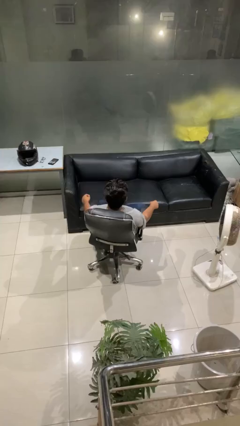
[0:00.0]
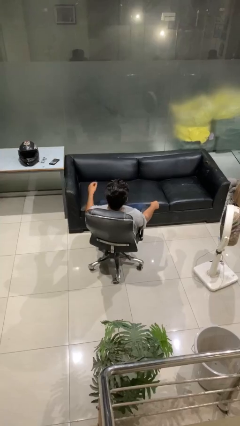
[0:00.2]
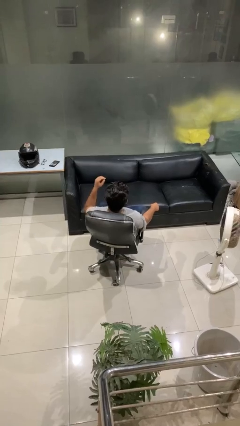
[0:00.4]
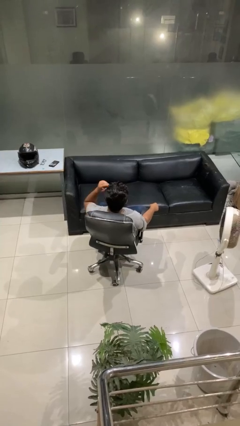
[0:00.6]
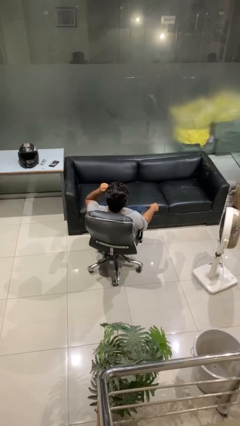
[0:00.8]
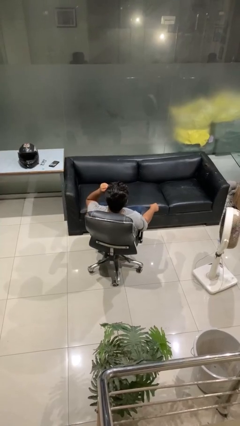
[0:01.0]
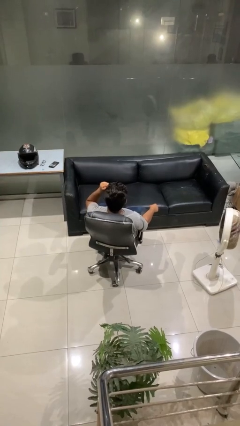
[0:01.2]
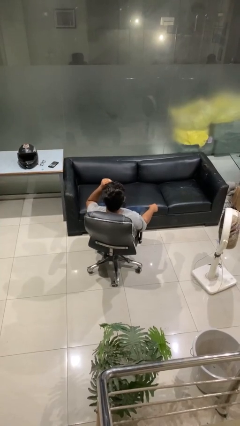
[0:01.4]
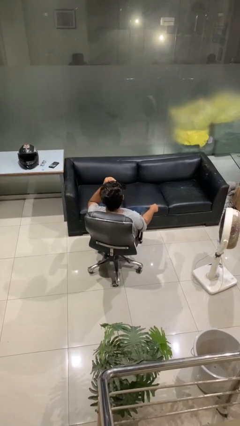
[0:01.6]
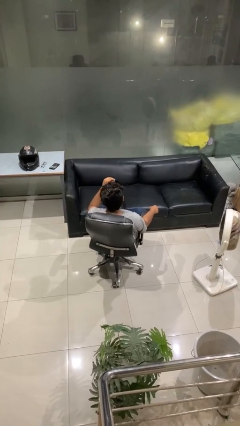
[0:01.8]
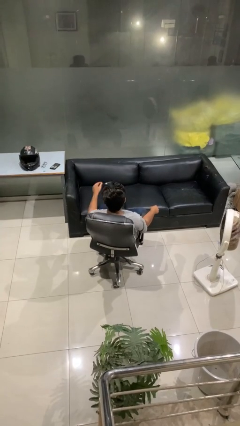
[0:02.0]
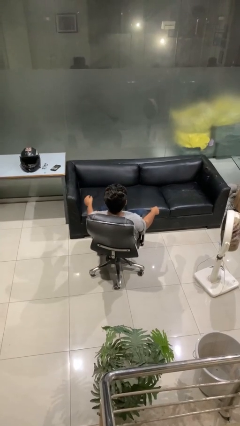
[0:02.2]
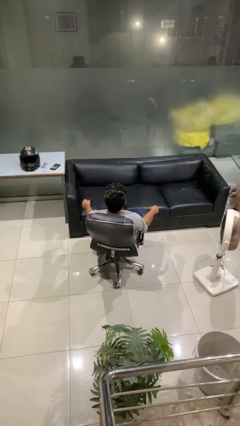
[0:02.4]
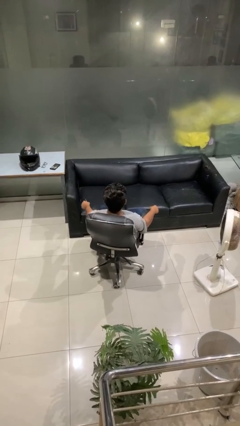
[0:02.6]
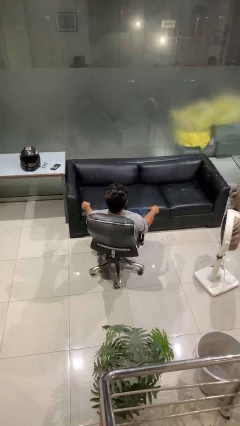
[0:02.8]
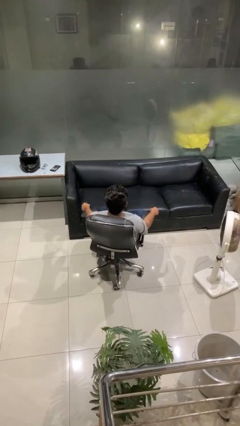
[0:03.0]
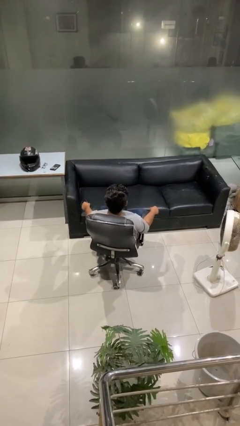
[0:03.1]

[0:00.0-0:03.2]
person takes off sunglasses

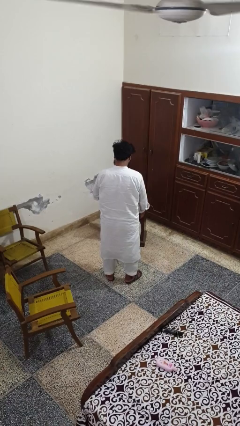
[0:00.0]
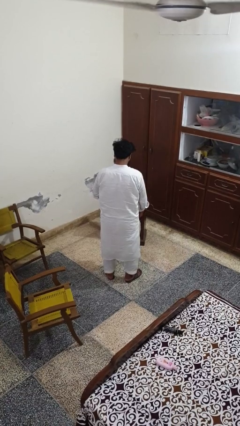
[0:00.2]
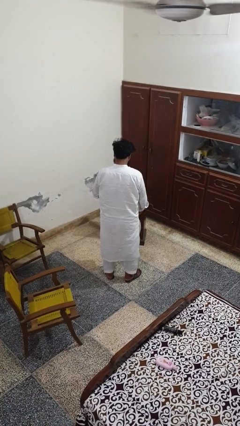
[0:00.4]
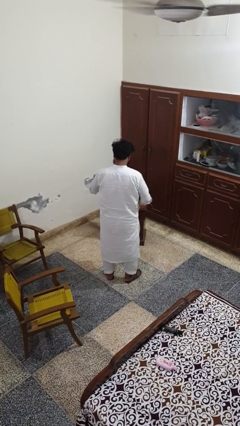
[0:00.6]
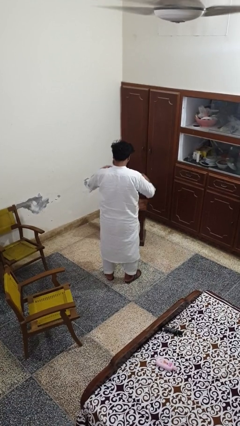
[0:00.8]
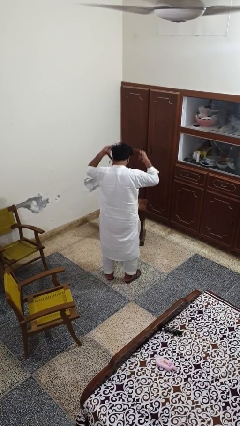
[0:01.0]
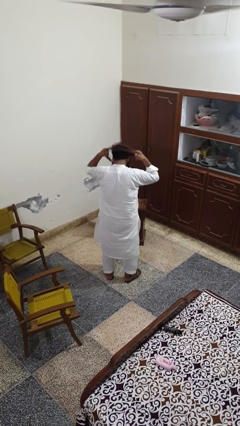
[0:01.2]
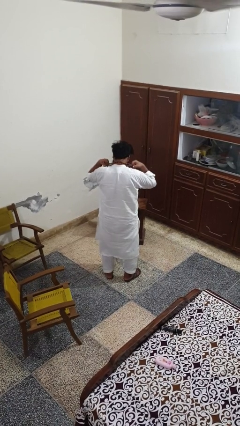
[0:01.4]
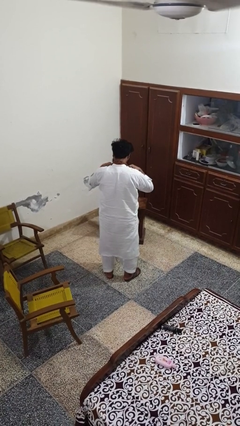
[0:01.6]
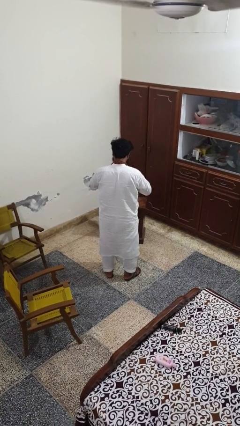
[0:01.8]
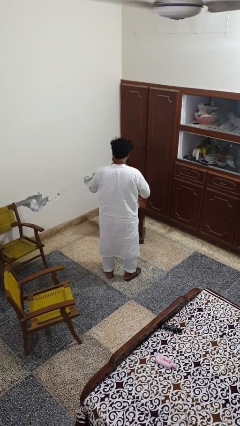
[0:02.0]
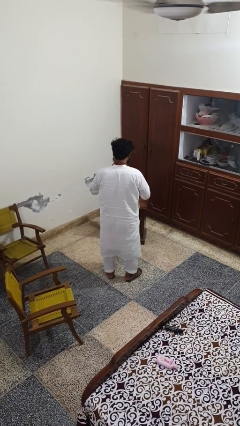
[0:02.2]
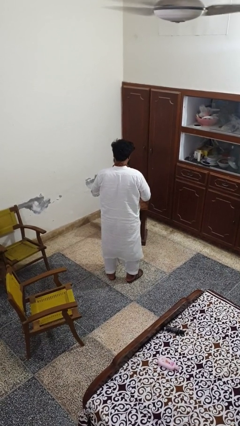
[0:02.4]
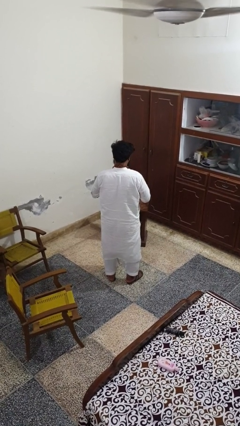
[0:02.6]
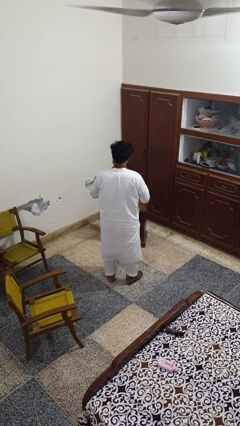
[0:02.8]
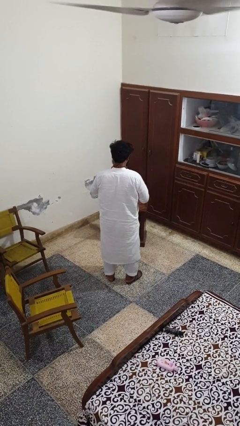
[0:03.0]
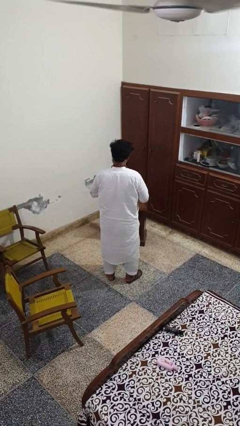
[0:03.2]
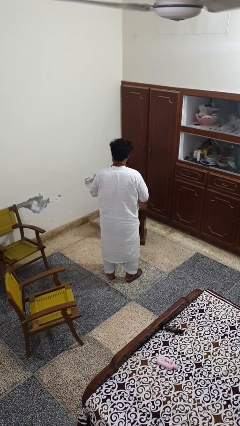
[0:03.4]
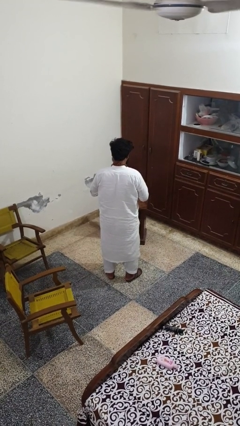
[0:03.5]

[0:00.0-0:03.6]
person puts on necklace

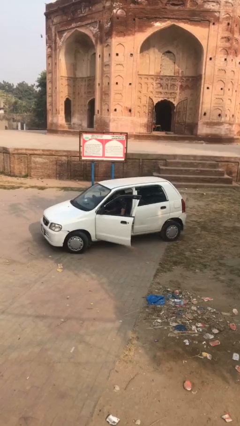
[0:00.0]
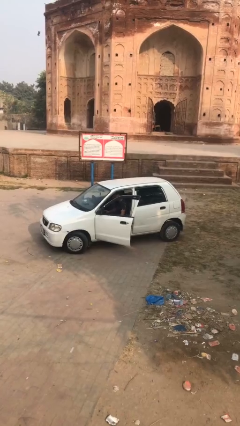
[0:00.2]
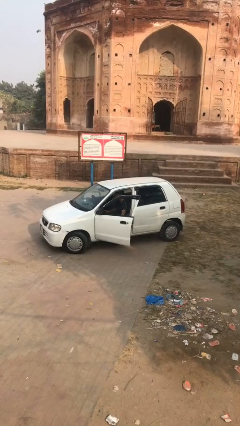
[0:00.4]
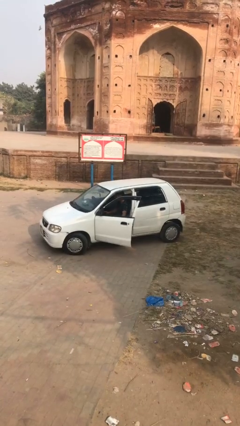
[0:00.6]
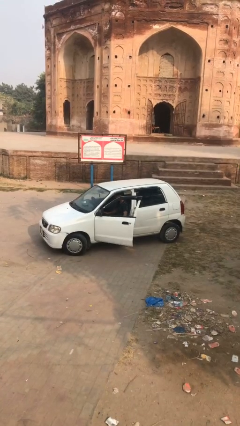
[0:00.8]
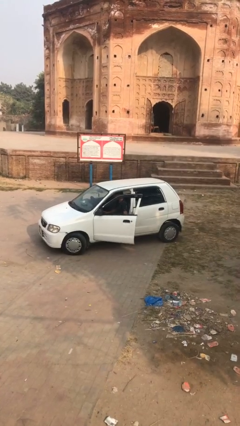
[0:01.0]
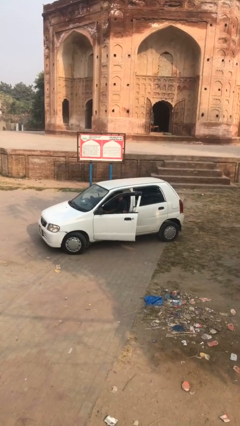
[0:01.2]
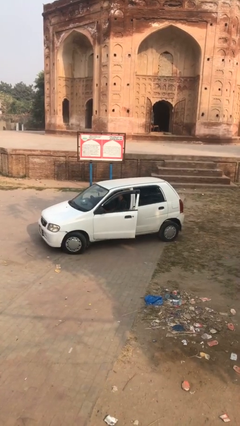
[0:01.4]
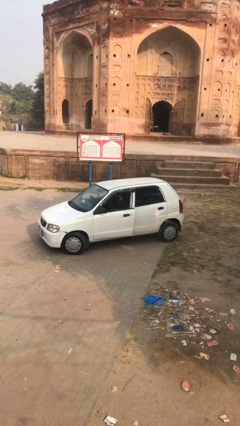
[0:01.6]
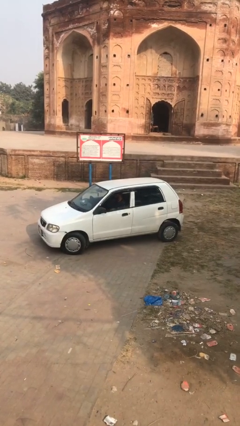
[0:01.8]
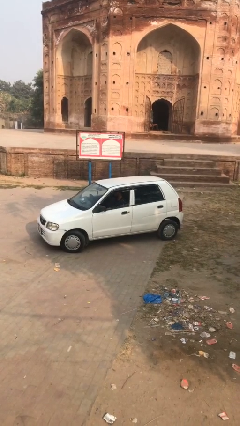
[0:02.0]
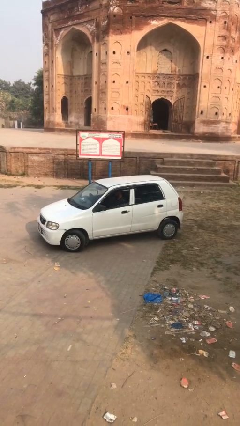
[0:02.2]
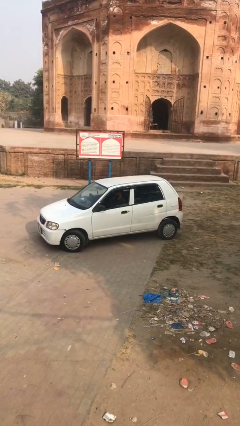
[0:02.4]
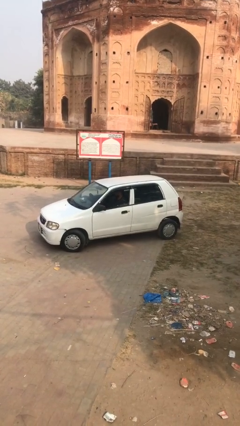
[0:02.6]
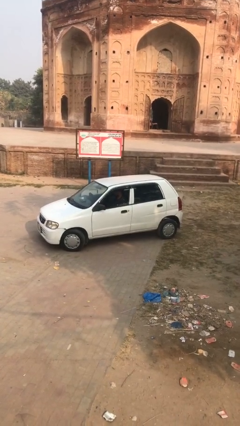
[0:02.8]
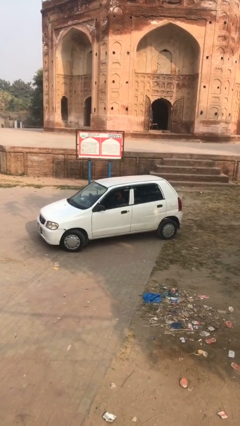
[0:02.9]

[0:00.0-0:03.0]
person closes car door

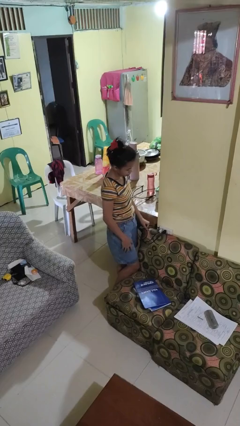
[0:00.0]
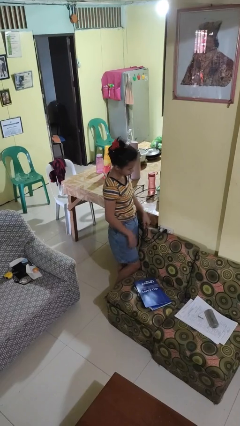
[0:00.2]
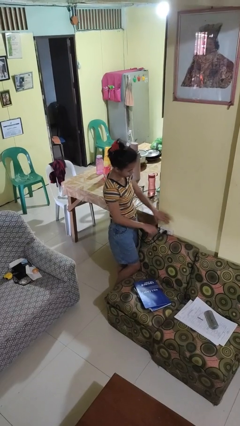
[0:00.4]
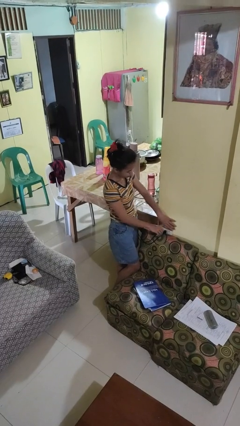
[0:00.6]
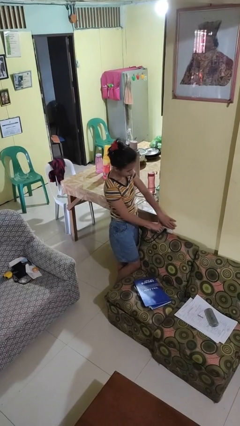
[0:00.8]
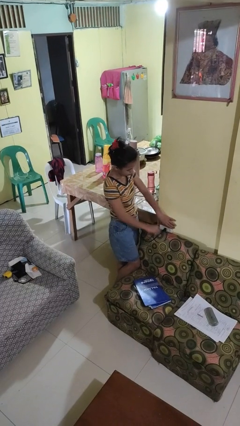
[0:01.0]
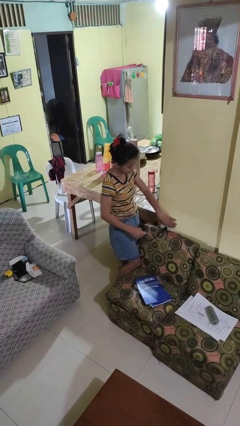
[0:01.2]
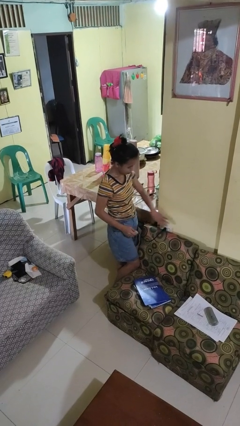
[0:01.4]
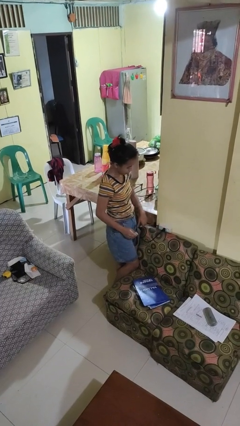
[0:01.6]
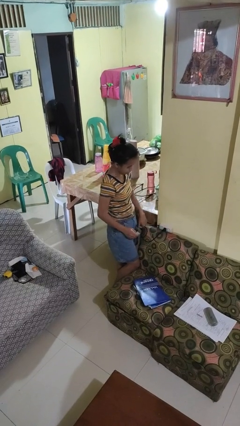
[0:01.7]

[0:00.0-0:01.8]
person unplugs from electrical socket

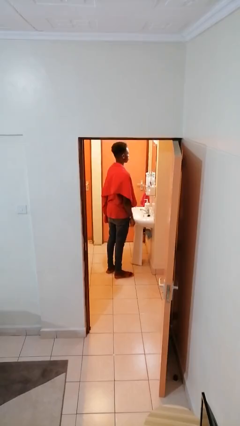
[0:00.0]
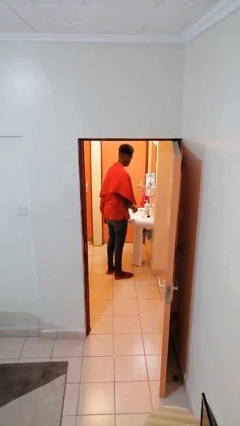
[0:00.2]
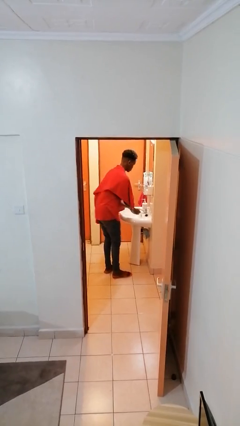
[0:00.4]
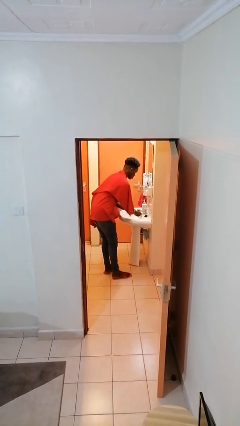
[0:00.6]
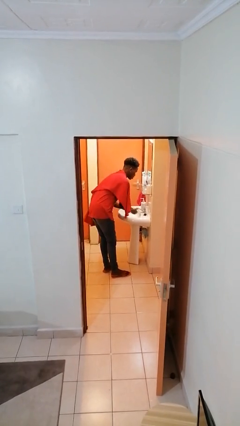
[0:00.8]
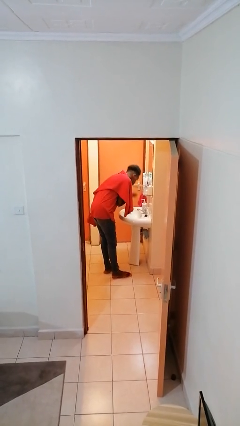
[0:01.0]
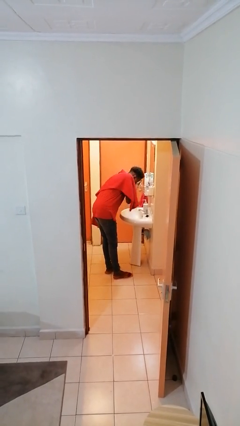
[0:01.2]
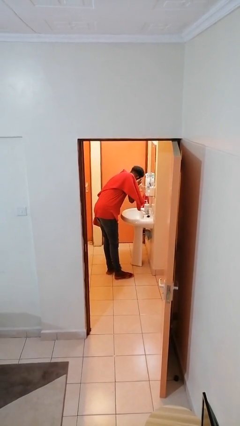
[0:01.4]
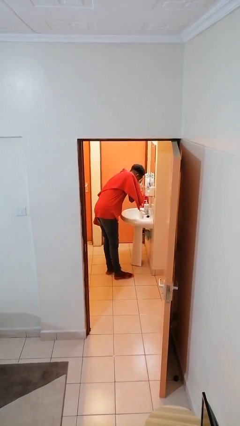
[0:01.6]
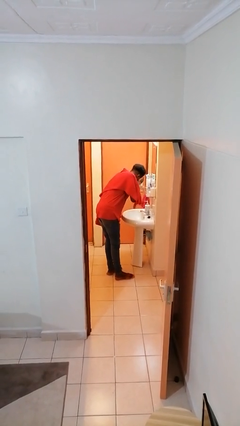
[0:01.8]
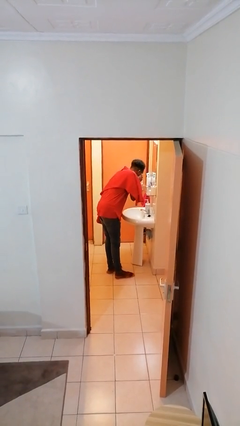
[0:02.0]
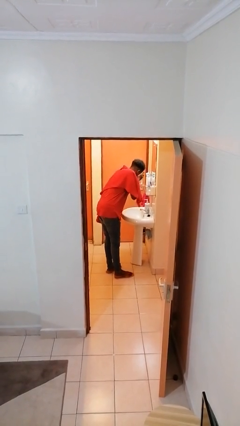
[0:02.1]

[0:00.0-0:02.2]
person washes face

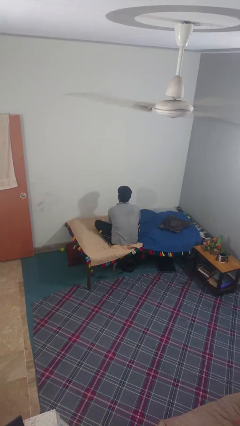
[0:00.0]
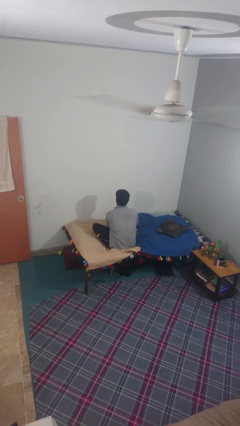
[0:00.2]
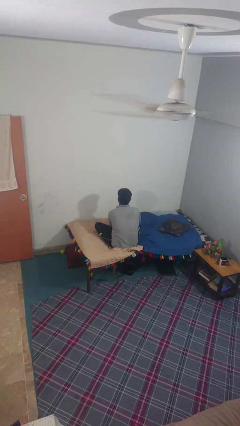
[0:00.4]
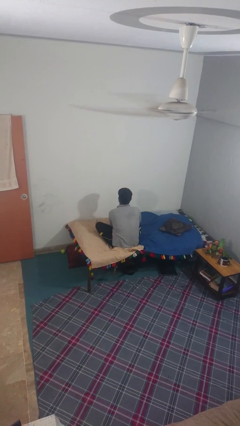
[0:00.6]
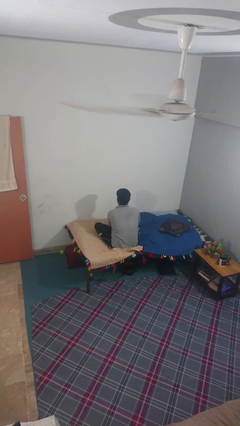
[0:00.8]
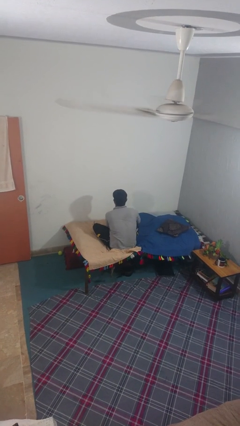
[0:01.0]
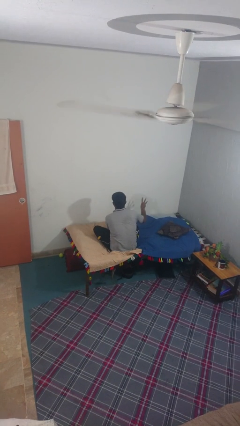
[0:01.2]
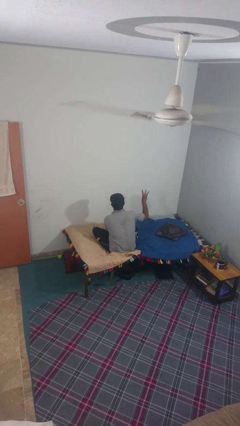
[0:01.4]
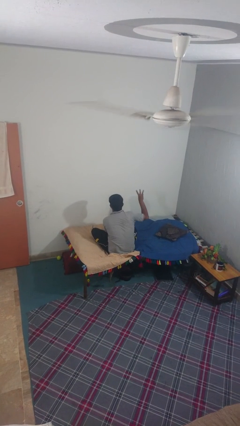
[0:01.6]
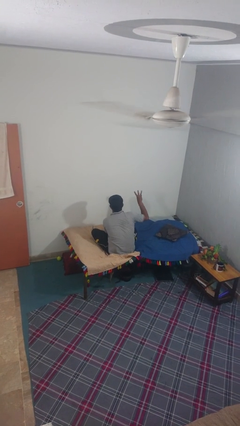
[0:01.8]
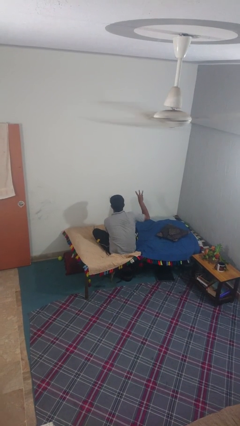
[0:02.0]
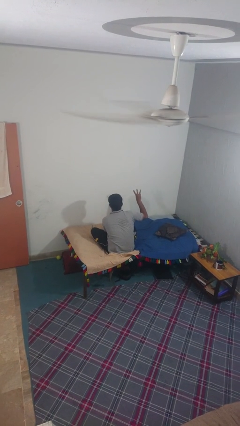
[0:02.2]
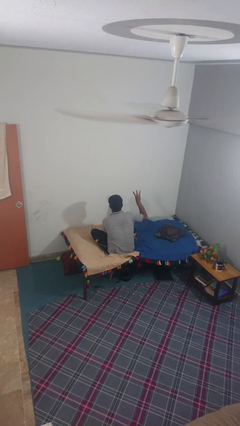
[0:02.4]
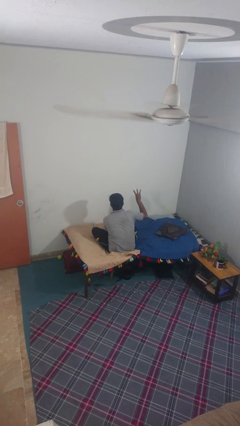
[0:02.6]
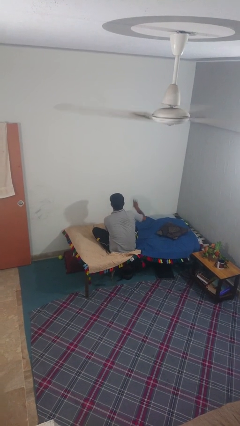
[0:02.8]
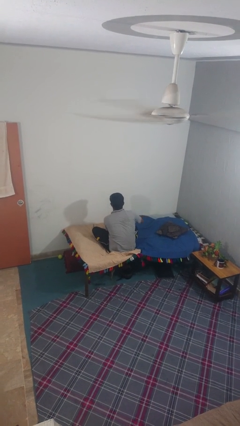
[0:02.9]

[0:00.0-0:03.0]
person gestures number three

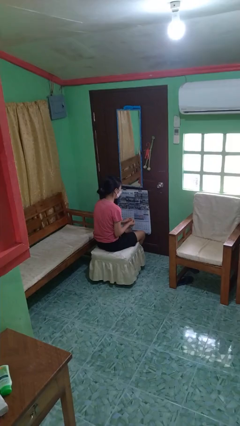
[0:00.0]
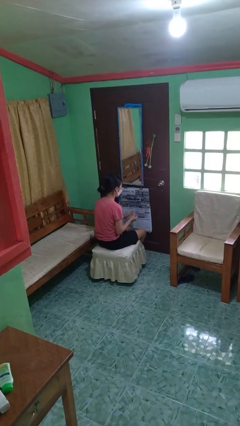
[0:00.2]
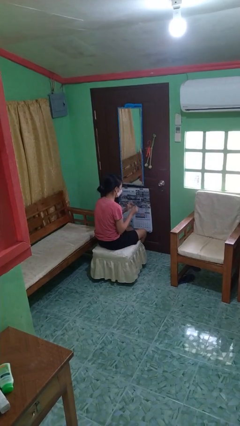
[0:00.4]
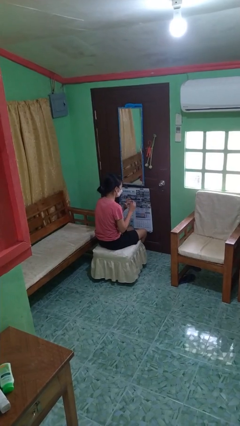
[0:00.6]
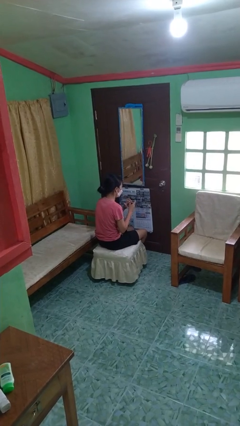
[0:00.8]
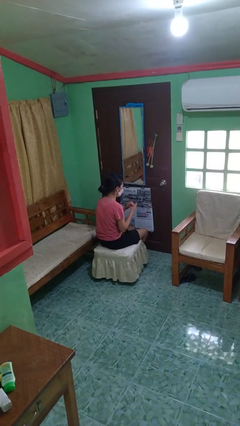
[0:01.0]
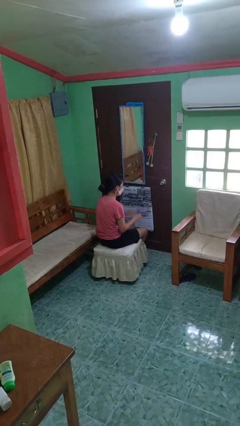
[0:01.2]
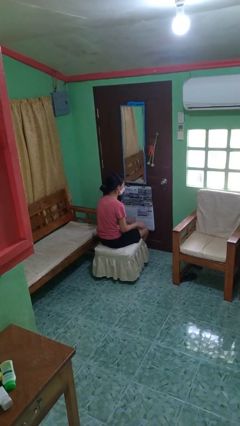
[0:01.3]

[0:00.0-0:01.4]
person puts on ring
